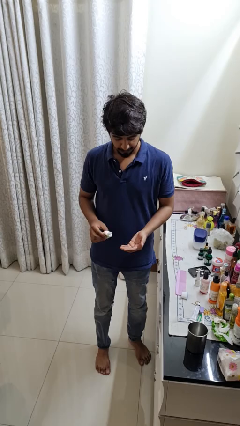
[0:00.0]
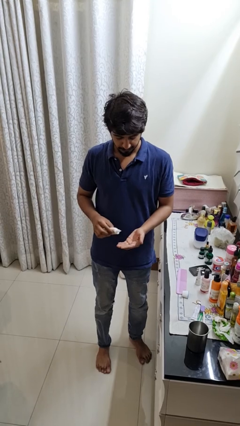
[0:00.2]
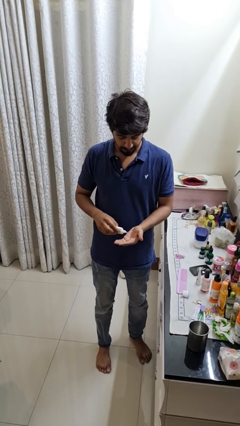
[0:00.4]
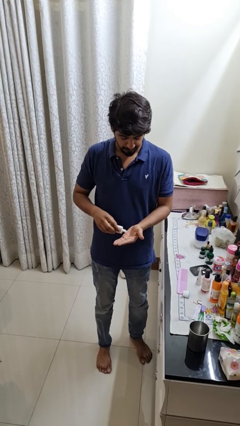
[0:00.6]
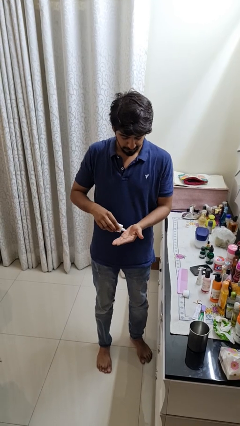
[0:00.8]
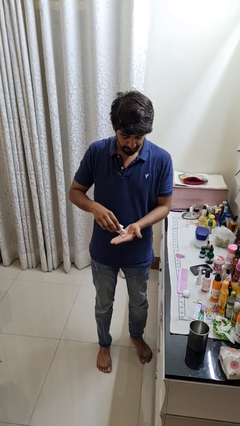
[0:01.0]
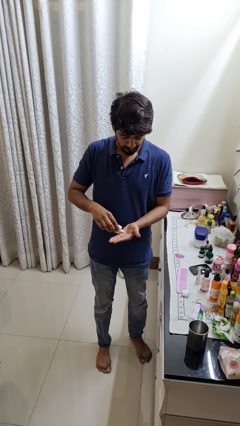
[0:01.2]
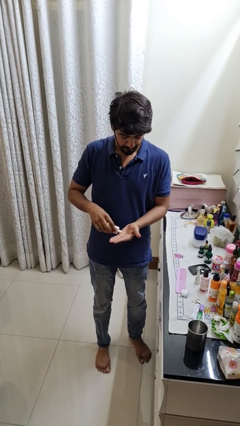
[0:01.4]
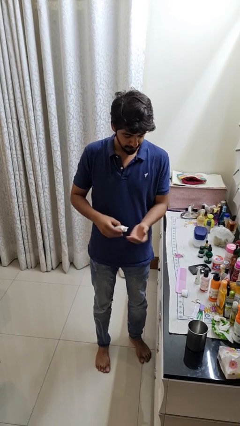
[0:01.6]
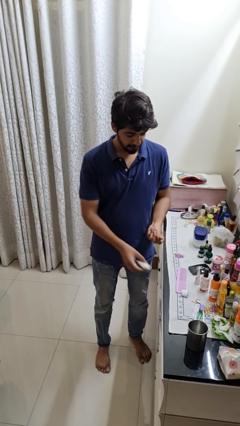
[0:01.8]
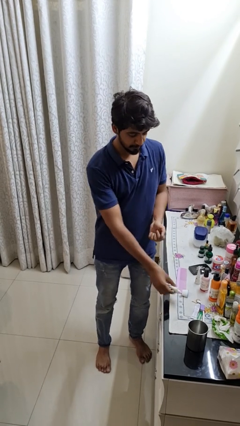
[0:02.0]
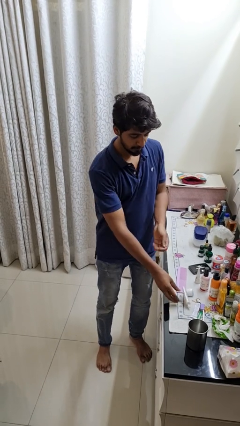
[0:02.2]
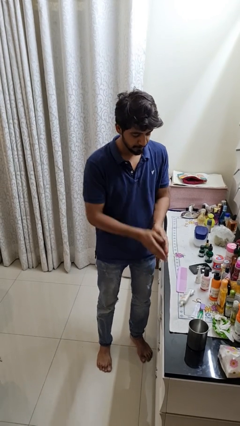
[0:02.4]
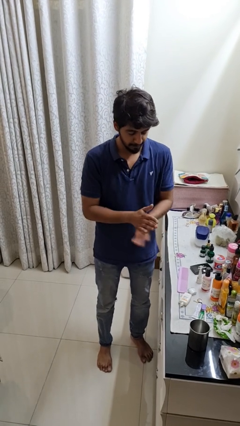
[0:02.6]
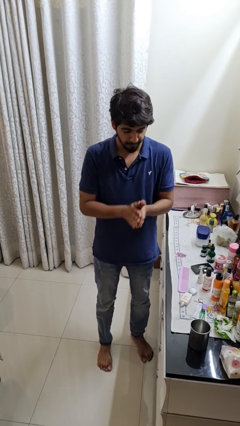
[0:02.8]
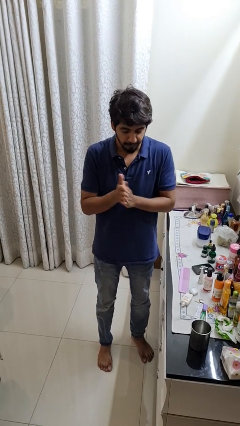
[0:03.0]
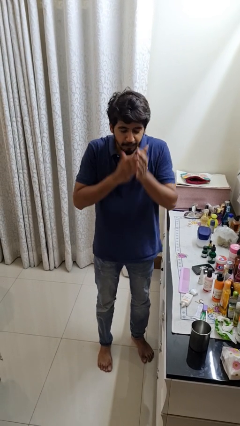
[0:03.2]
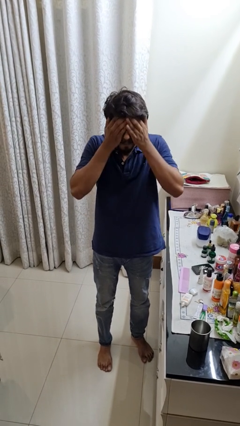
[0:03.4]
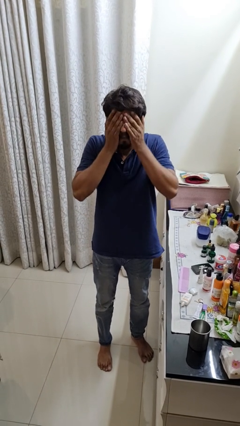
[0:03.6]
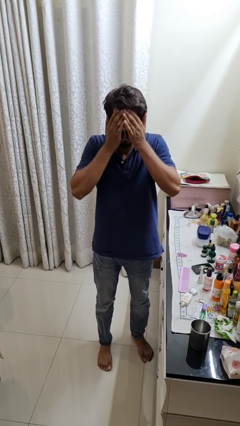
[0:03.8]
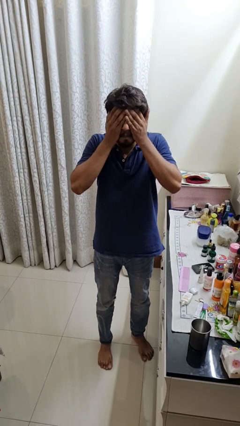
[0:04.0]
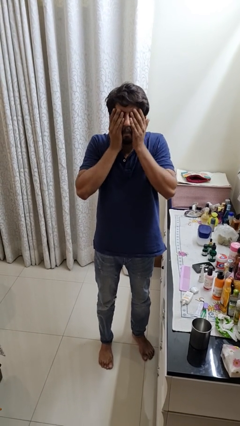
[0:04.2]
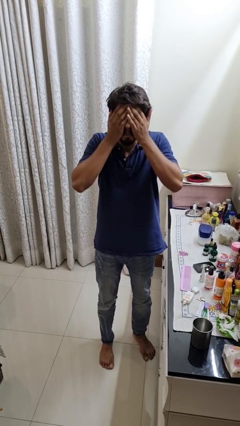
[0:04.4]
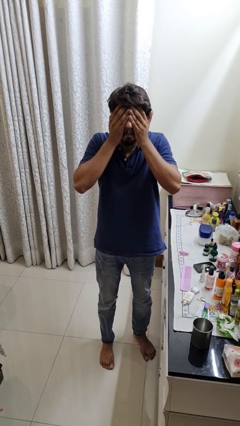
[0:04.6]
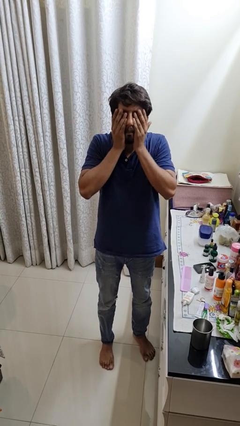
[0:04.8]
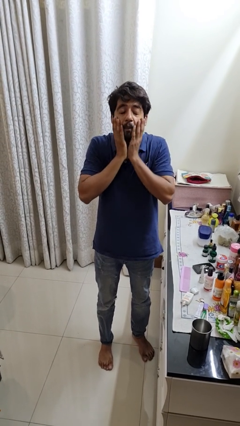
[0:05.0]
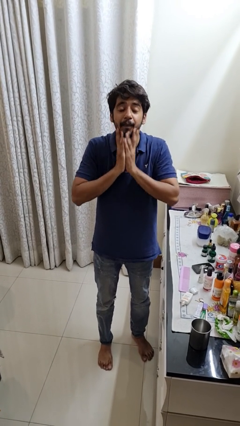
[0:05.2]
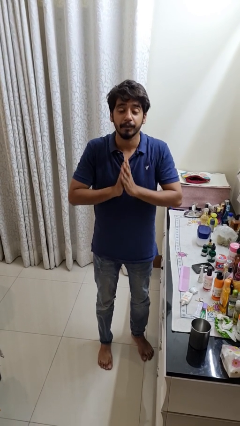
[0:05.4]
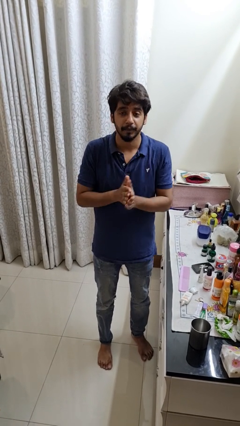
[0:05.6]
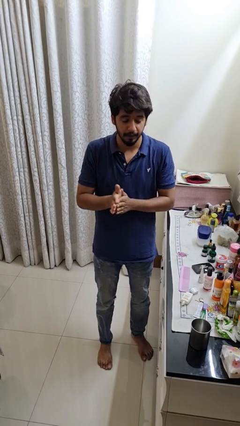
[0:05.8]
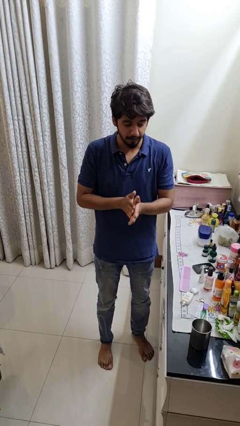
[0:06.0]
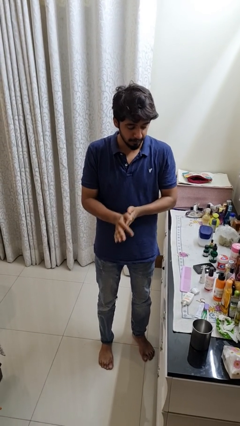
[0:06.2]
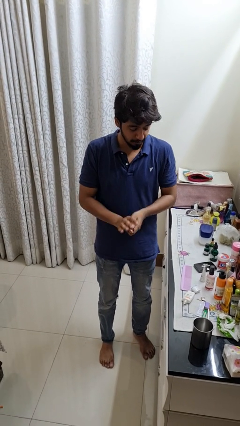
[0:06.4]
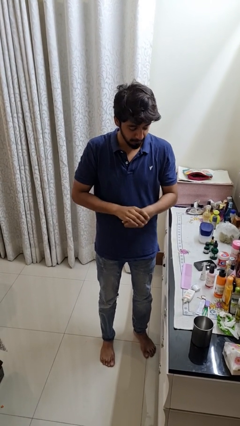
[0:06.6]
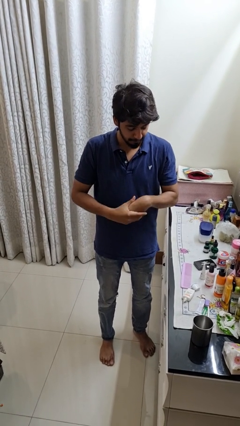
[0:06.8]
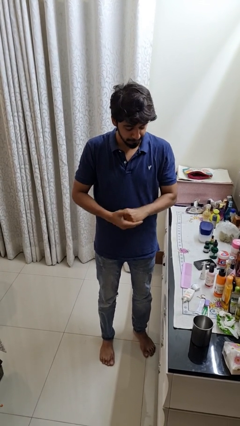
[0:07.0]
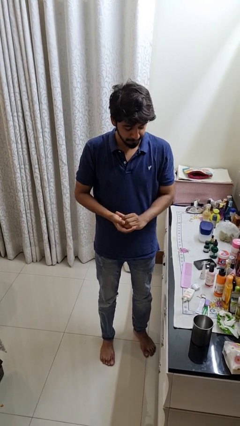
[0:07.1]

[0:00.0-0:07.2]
person applies sunscreen

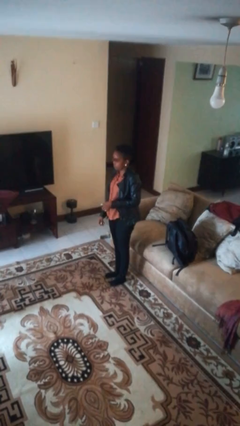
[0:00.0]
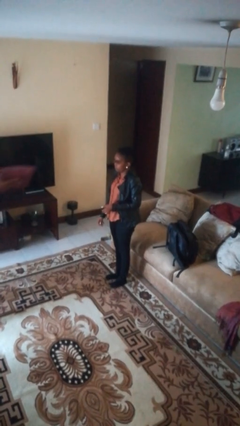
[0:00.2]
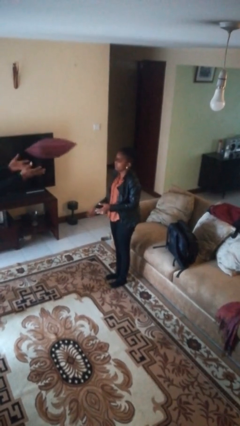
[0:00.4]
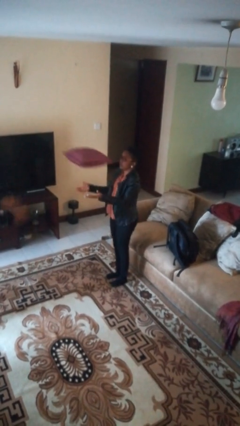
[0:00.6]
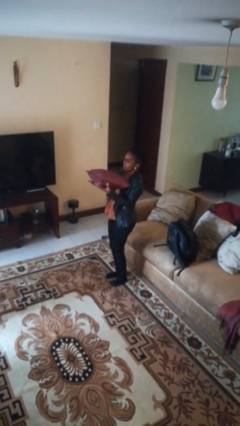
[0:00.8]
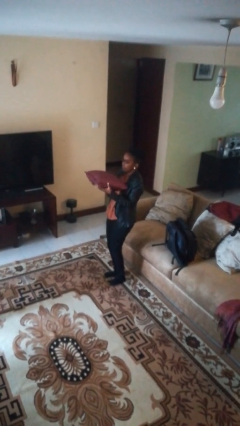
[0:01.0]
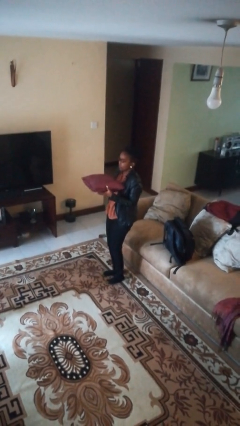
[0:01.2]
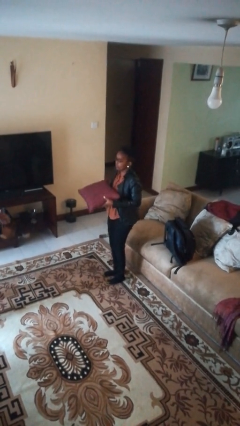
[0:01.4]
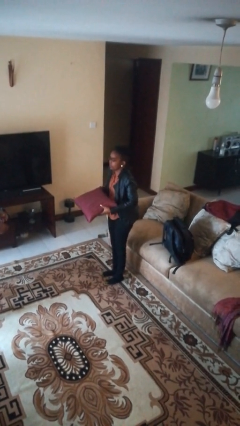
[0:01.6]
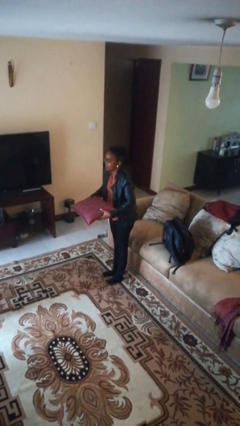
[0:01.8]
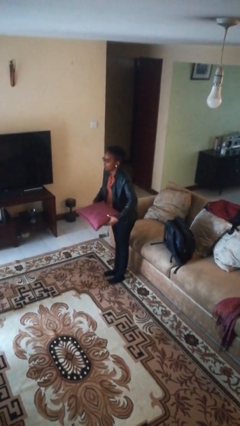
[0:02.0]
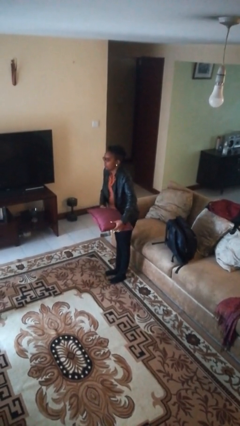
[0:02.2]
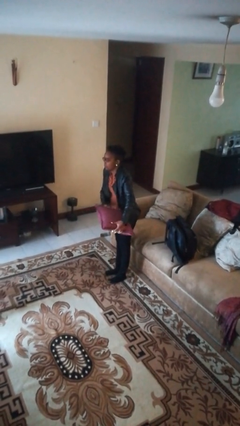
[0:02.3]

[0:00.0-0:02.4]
person catches object from person

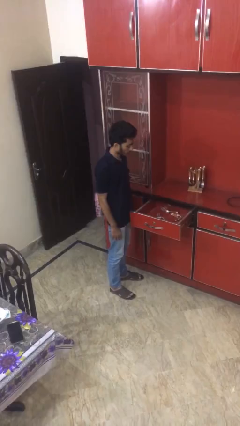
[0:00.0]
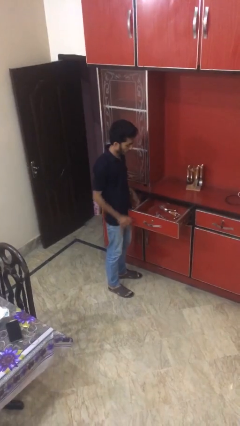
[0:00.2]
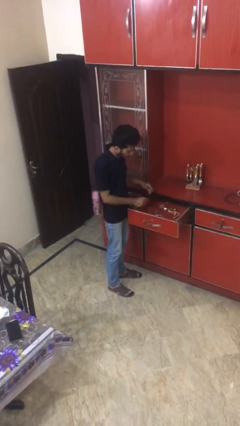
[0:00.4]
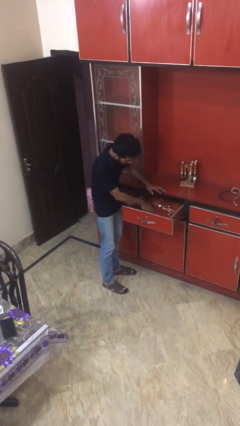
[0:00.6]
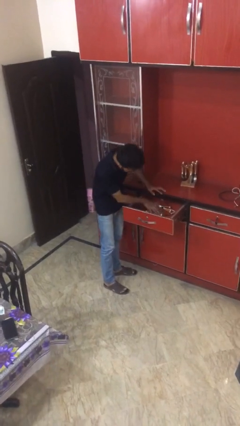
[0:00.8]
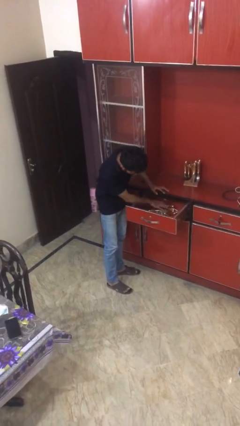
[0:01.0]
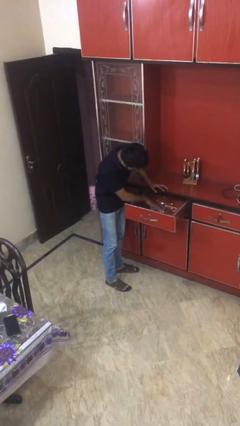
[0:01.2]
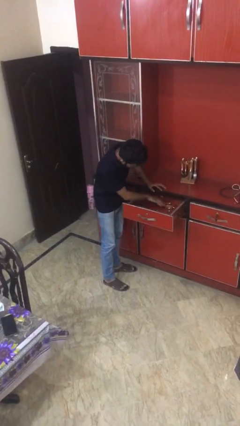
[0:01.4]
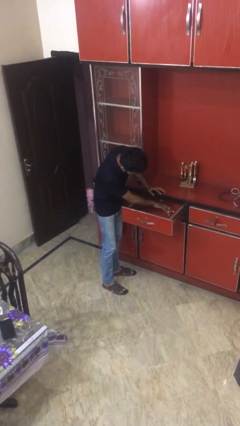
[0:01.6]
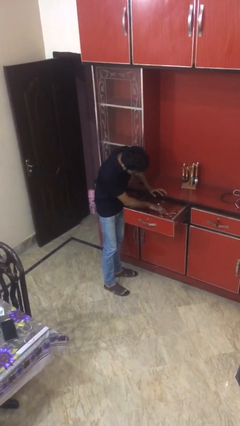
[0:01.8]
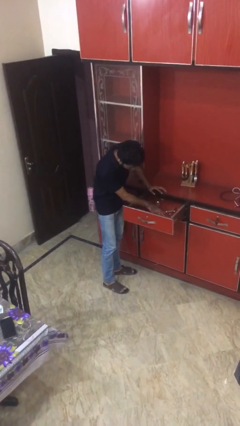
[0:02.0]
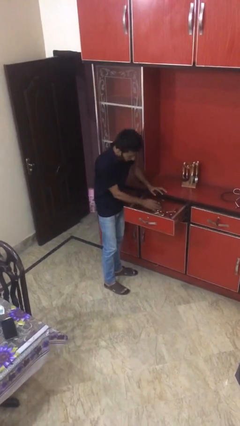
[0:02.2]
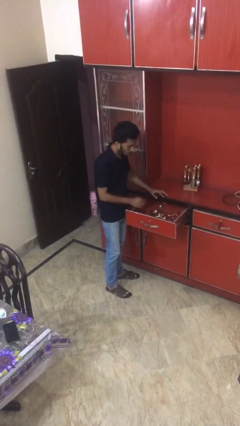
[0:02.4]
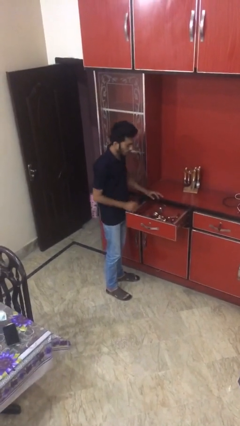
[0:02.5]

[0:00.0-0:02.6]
person searches in kitchen drawer

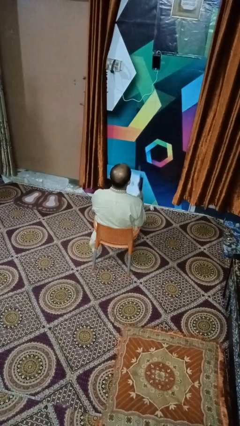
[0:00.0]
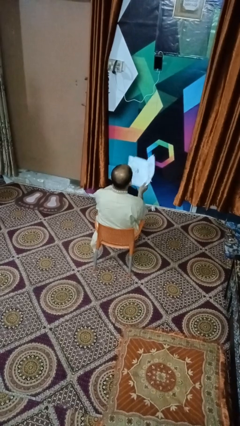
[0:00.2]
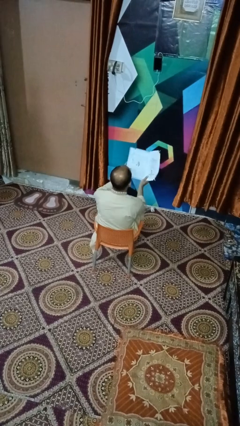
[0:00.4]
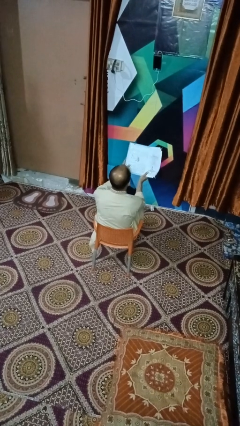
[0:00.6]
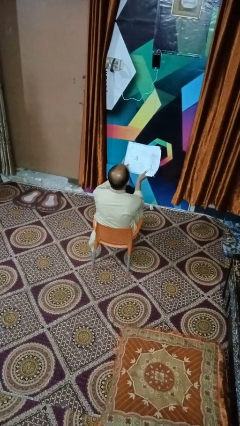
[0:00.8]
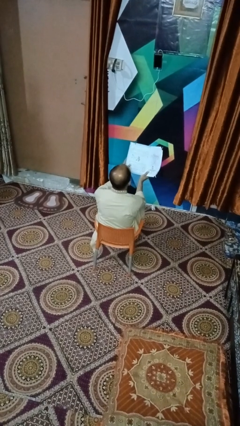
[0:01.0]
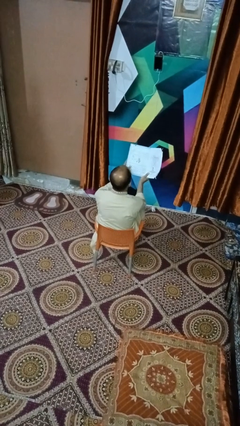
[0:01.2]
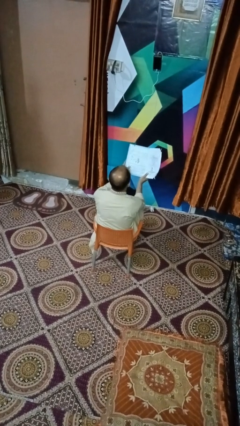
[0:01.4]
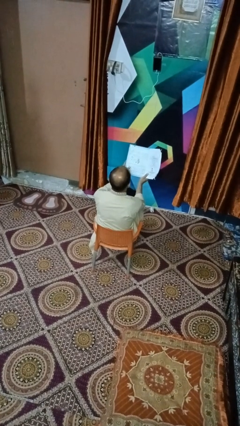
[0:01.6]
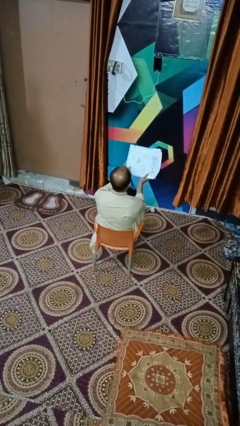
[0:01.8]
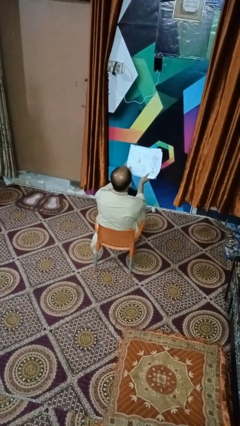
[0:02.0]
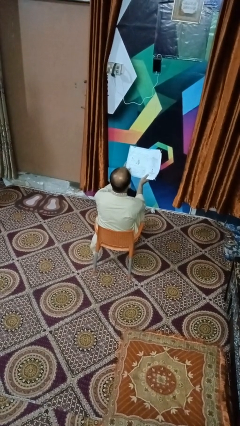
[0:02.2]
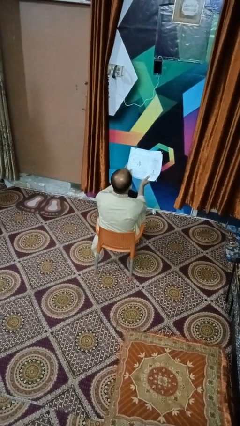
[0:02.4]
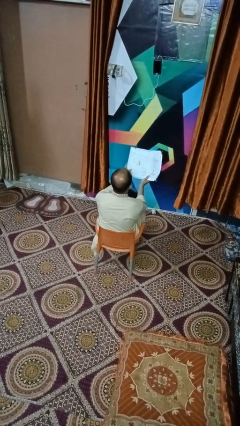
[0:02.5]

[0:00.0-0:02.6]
person reads book

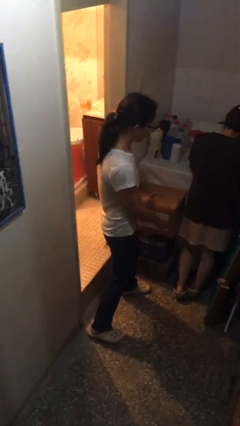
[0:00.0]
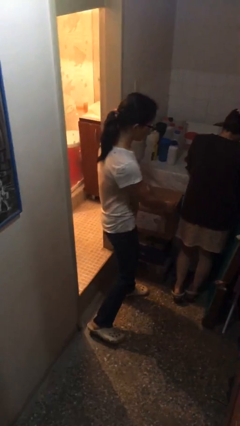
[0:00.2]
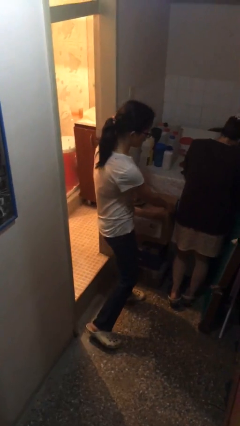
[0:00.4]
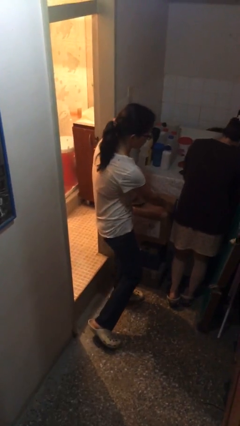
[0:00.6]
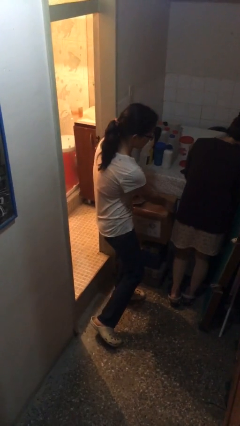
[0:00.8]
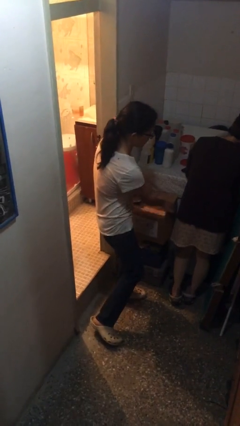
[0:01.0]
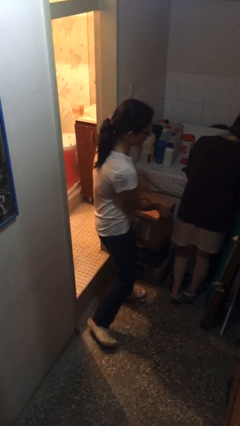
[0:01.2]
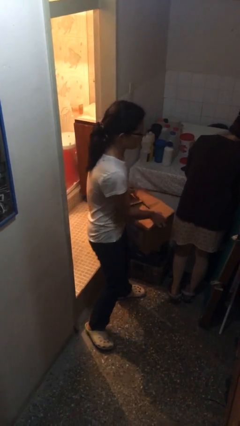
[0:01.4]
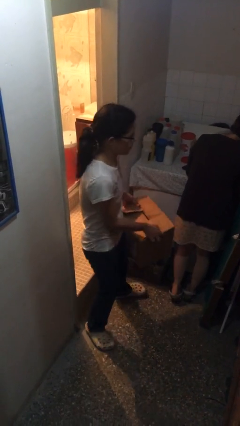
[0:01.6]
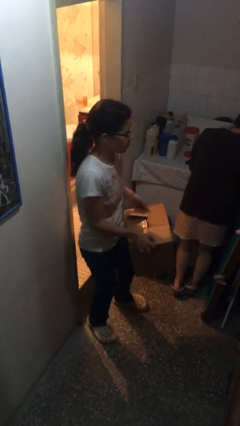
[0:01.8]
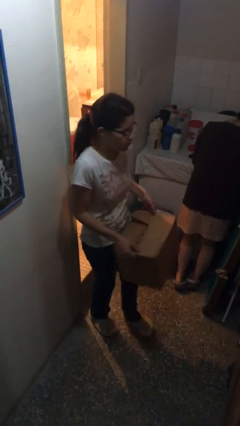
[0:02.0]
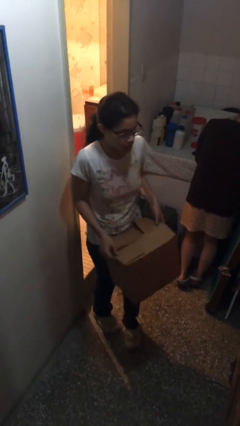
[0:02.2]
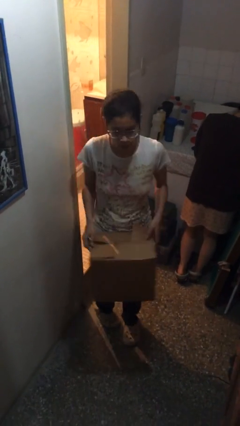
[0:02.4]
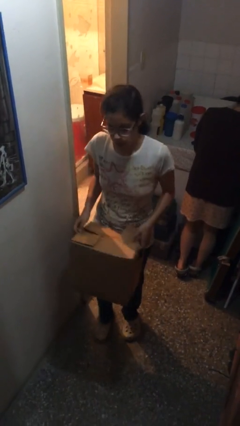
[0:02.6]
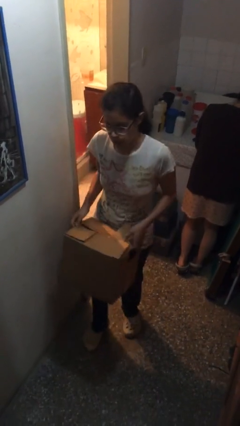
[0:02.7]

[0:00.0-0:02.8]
person steals object from person
